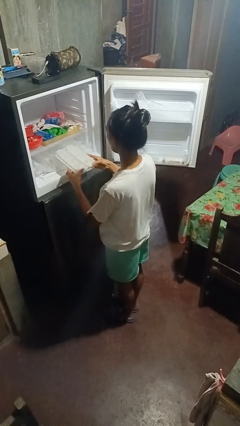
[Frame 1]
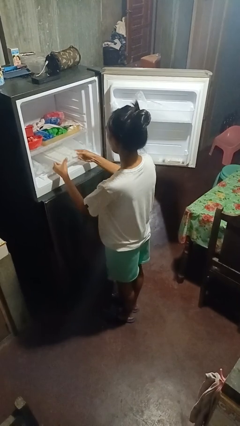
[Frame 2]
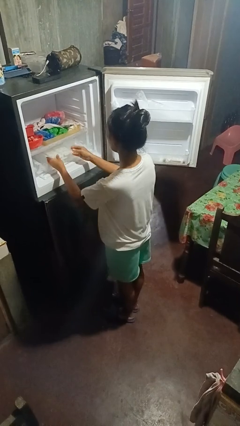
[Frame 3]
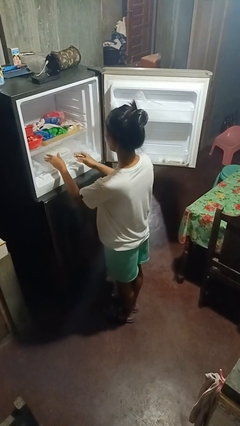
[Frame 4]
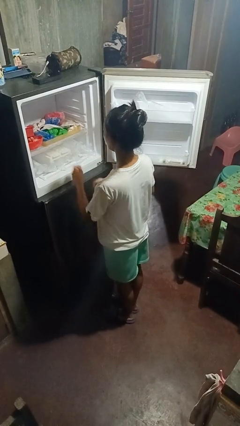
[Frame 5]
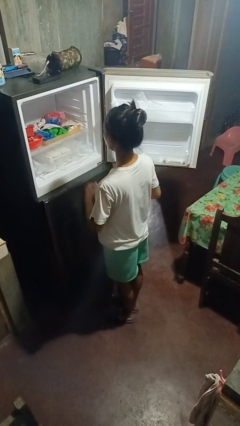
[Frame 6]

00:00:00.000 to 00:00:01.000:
person puts object into refrigerator

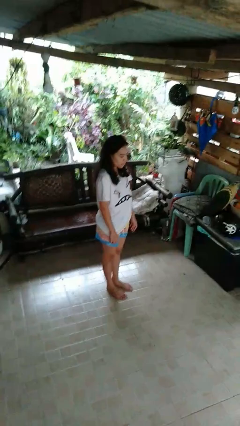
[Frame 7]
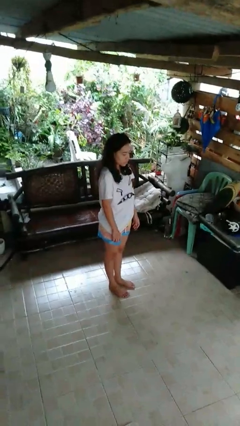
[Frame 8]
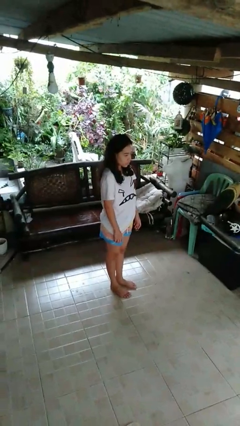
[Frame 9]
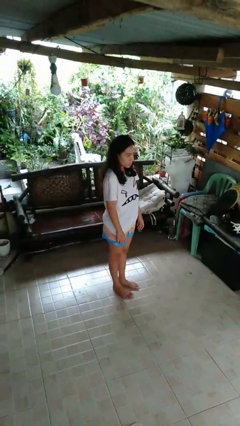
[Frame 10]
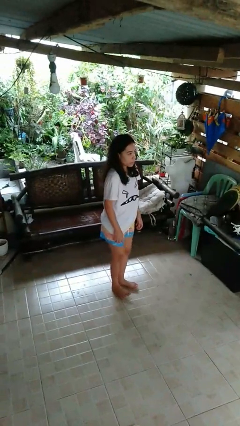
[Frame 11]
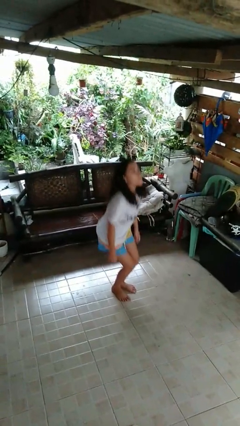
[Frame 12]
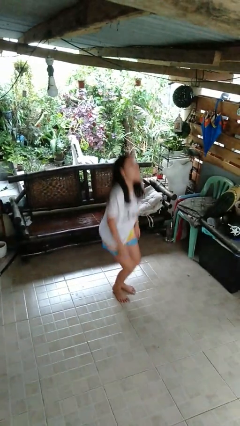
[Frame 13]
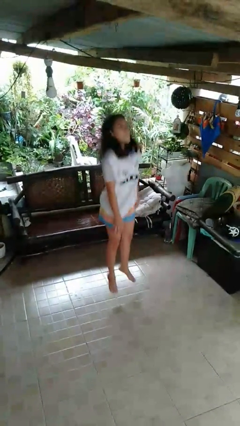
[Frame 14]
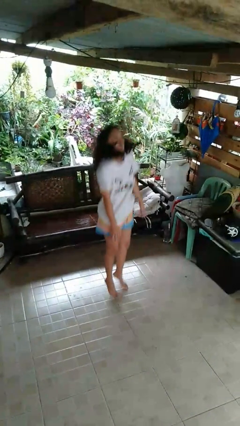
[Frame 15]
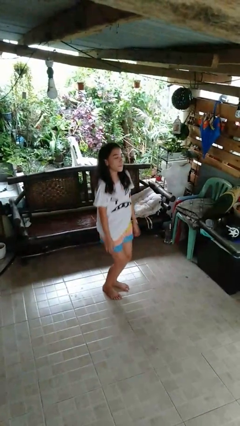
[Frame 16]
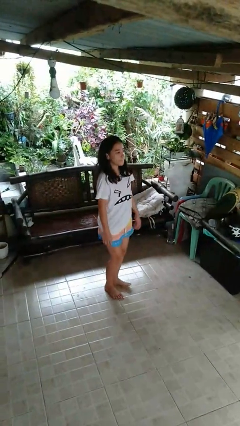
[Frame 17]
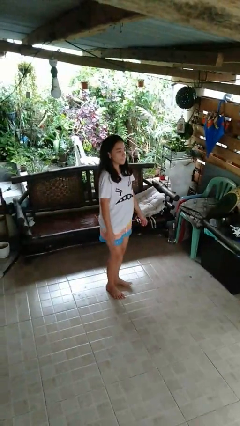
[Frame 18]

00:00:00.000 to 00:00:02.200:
person jumps

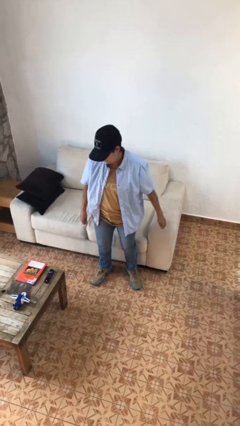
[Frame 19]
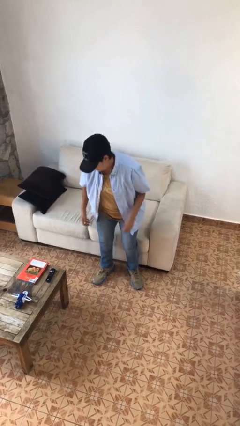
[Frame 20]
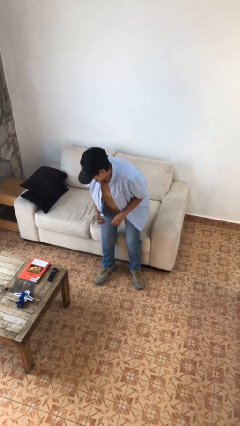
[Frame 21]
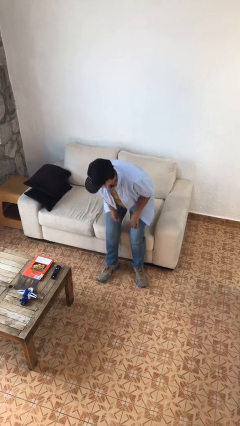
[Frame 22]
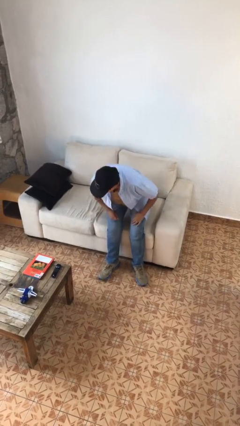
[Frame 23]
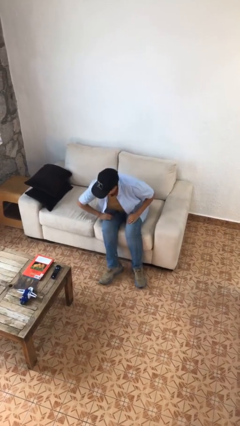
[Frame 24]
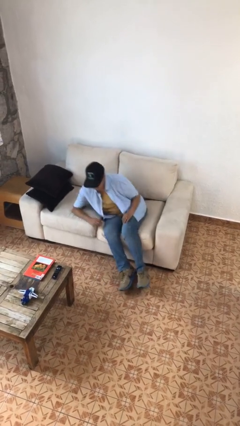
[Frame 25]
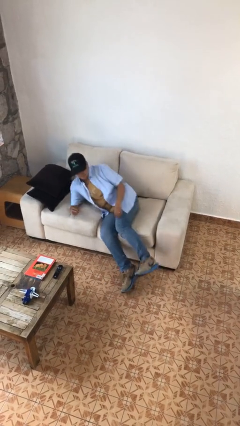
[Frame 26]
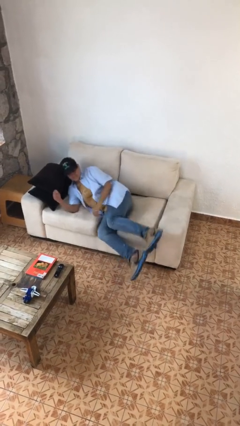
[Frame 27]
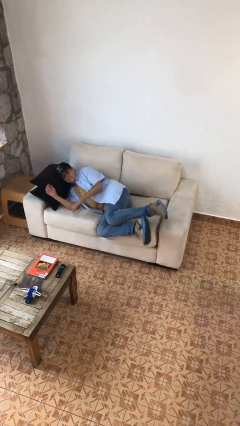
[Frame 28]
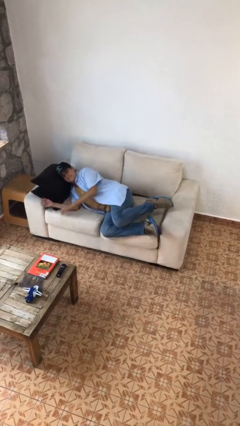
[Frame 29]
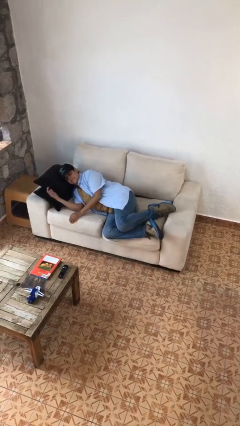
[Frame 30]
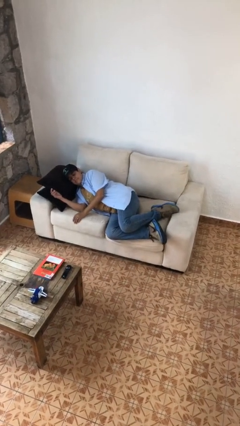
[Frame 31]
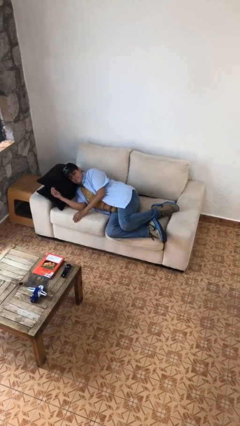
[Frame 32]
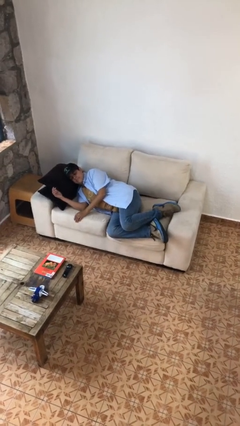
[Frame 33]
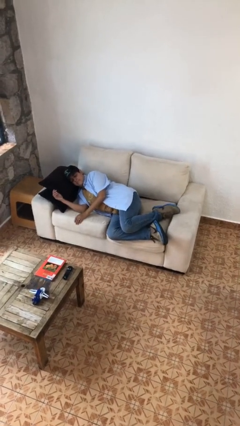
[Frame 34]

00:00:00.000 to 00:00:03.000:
person lies down on couch

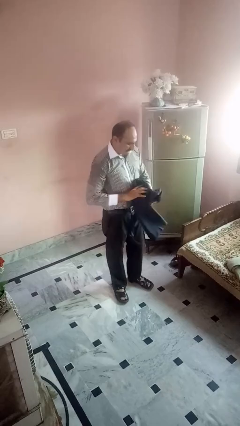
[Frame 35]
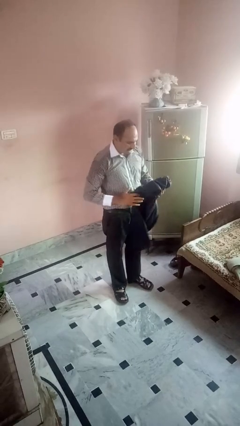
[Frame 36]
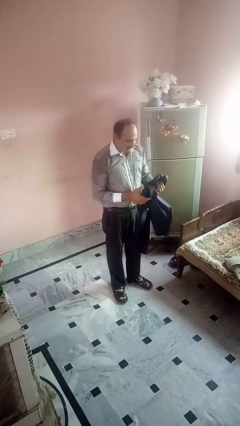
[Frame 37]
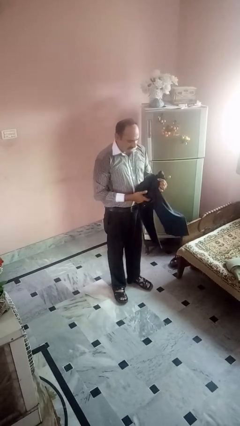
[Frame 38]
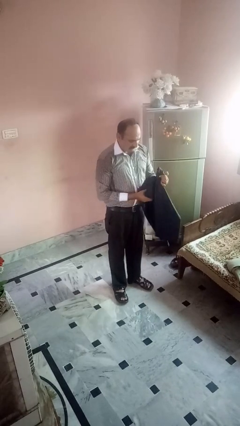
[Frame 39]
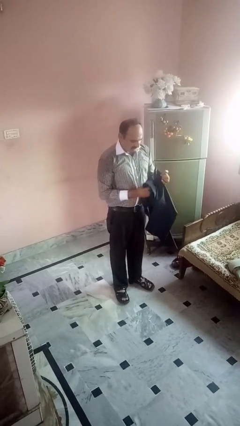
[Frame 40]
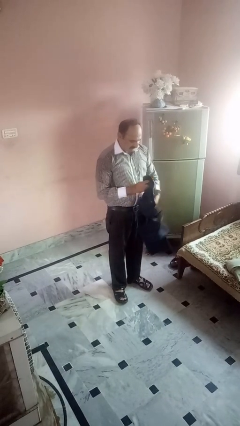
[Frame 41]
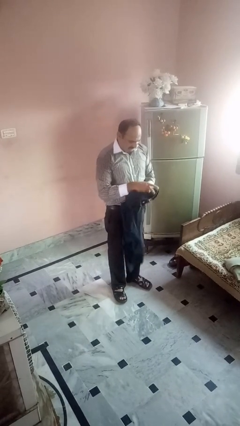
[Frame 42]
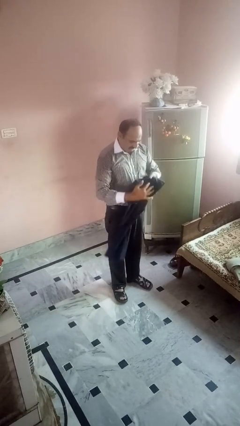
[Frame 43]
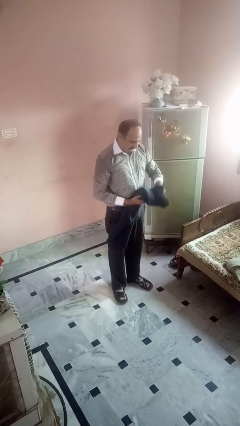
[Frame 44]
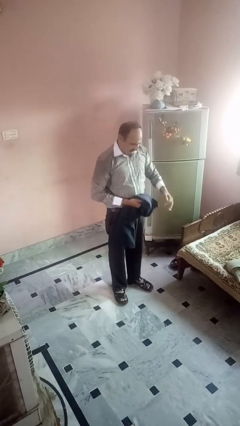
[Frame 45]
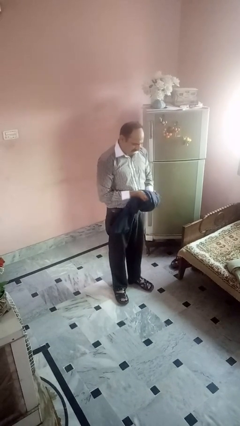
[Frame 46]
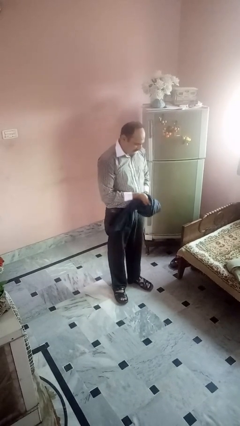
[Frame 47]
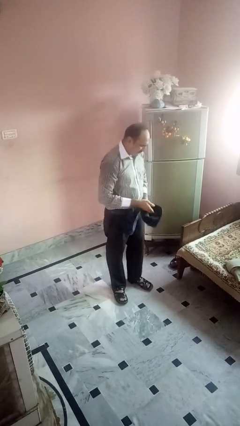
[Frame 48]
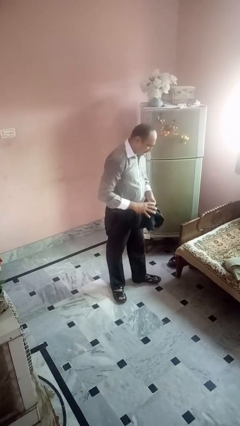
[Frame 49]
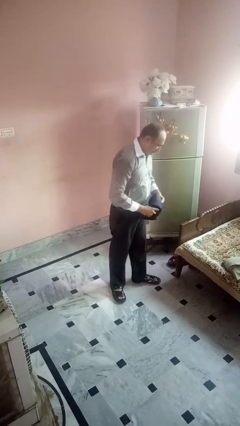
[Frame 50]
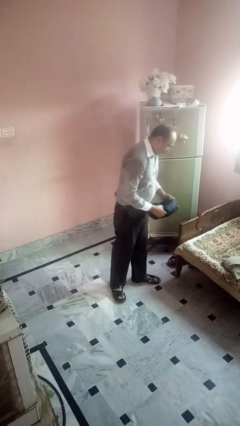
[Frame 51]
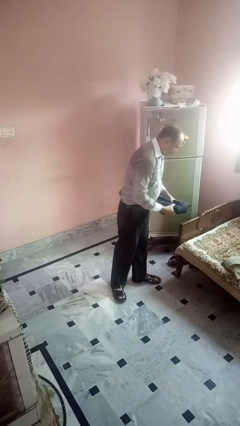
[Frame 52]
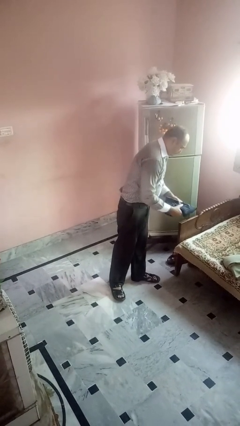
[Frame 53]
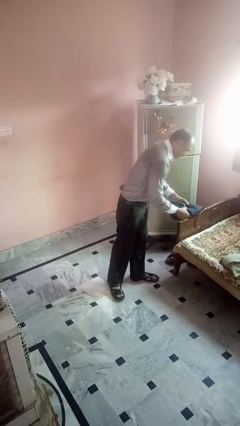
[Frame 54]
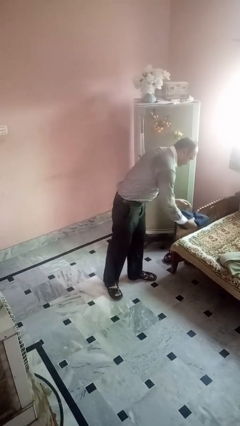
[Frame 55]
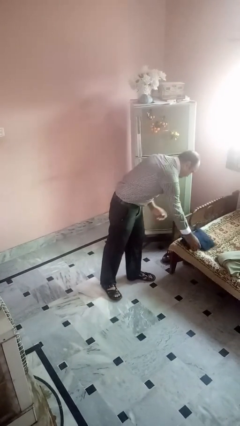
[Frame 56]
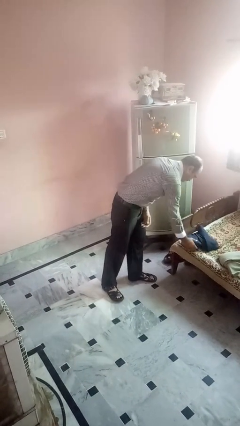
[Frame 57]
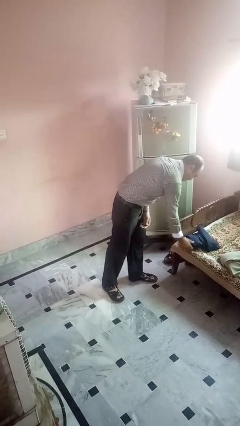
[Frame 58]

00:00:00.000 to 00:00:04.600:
person folds pants

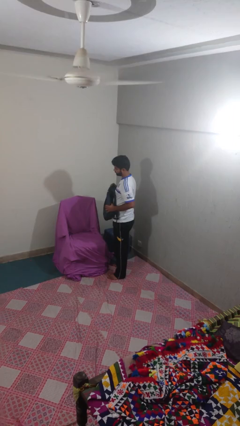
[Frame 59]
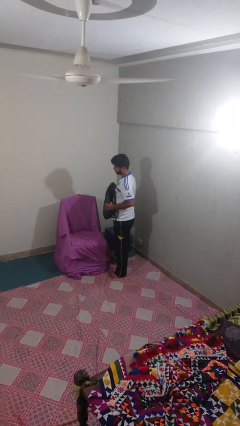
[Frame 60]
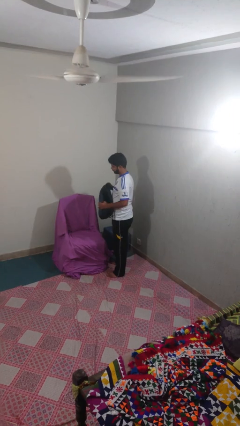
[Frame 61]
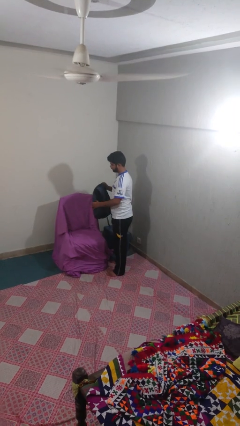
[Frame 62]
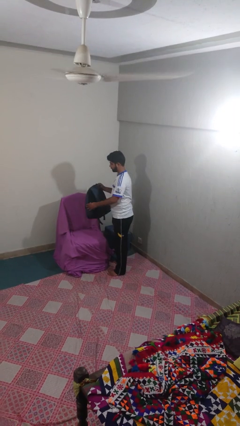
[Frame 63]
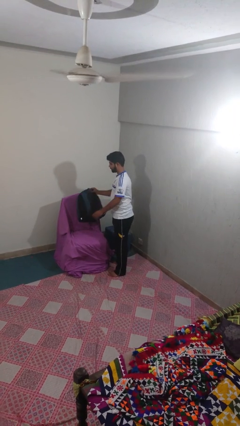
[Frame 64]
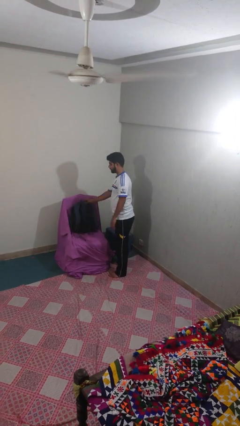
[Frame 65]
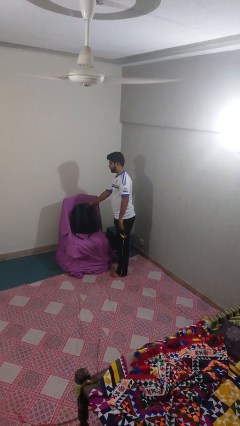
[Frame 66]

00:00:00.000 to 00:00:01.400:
person puts down object on couch

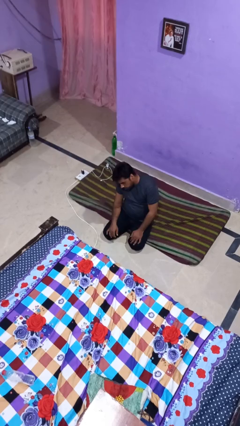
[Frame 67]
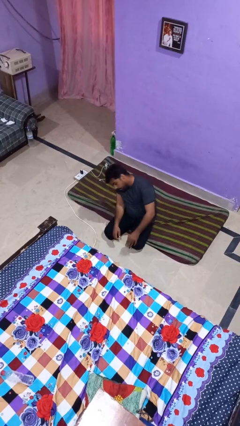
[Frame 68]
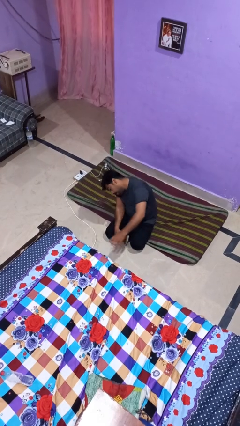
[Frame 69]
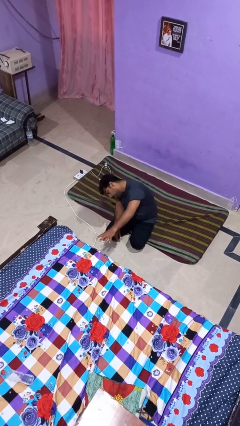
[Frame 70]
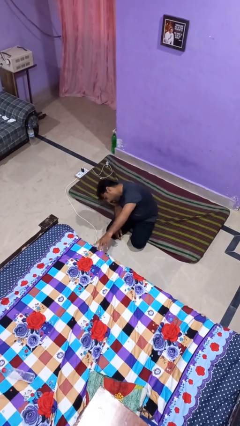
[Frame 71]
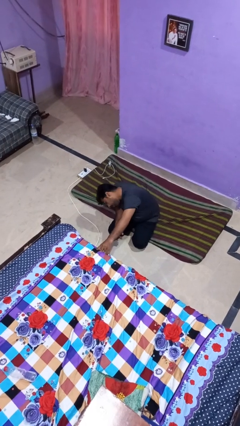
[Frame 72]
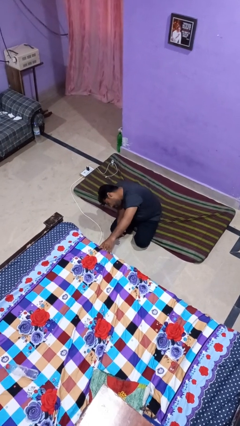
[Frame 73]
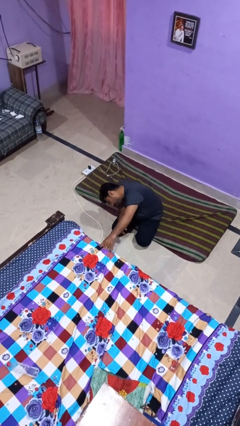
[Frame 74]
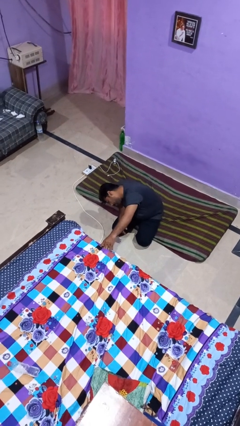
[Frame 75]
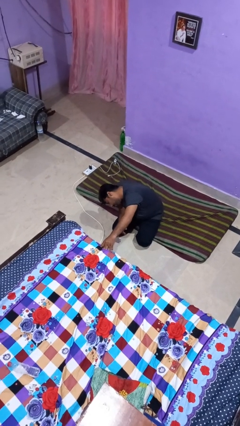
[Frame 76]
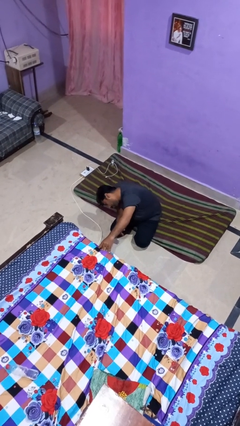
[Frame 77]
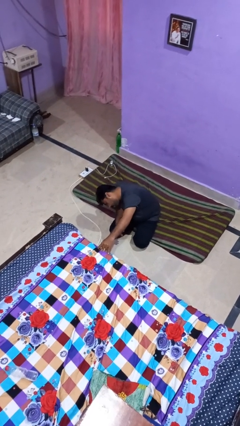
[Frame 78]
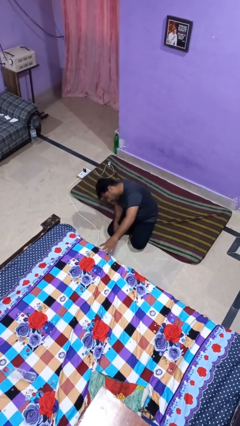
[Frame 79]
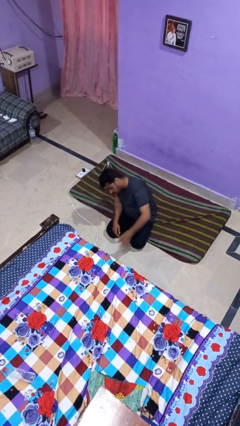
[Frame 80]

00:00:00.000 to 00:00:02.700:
person searches under bed

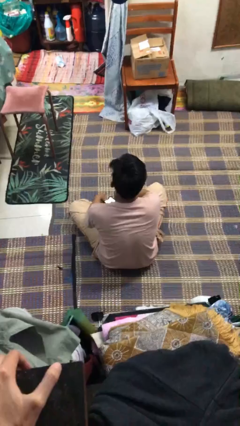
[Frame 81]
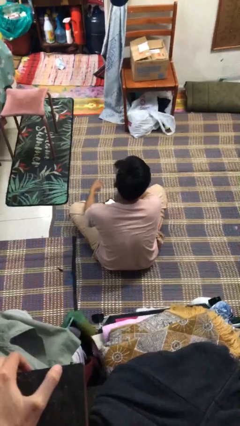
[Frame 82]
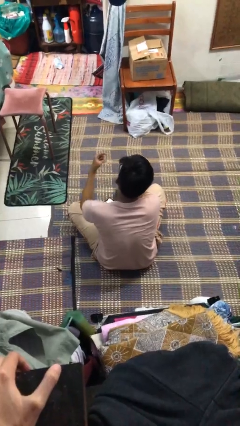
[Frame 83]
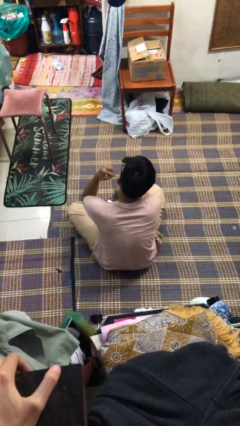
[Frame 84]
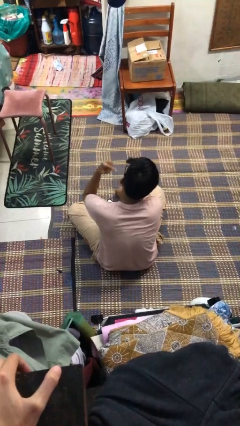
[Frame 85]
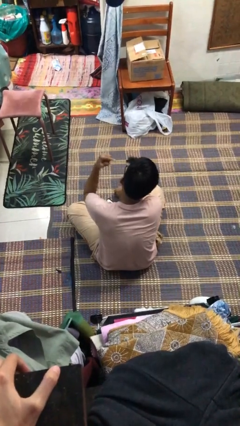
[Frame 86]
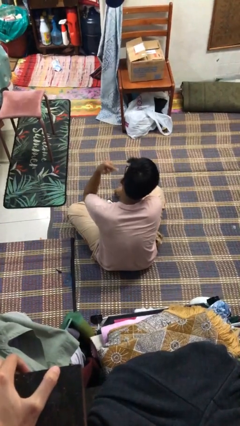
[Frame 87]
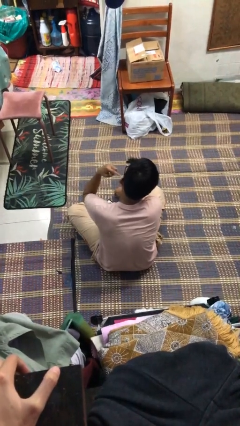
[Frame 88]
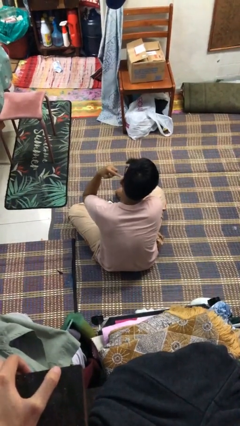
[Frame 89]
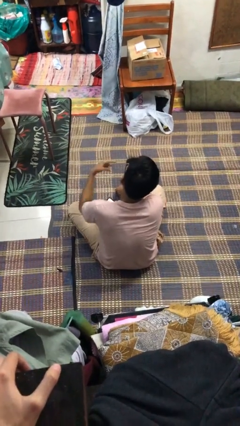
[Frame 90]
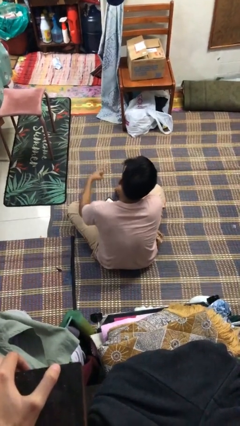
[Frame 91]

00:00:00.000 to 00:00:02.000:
person gestures listen closely
